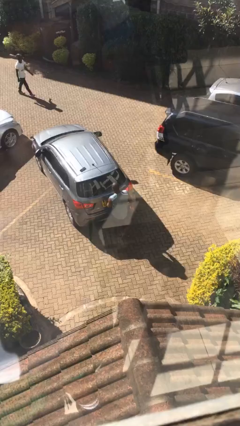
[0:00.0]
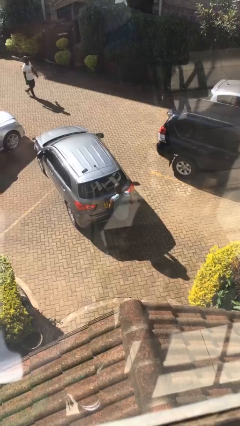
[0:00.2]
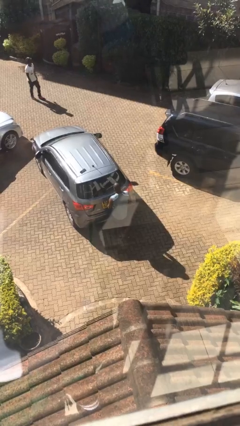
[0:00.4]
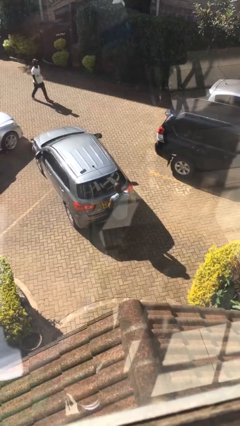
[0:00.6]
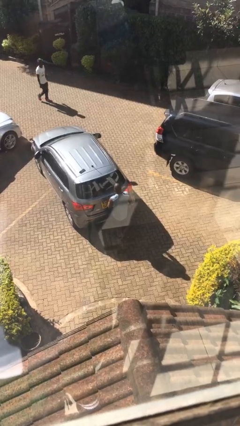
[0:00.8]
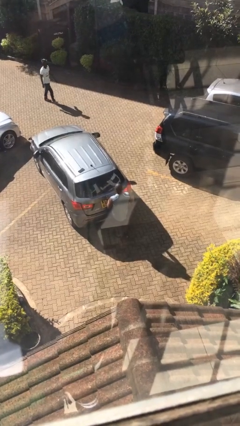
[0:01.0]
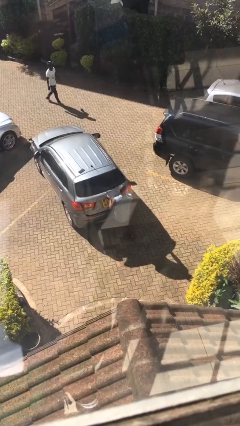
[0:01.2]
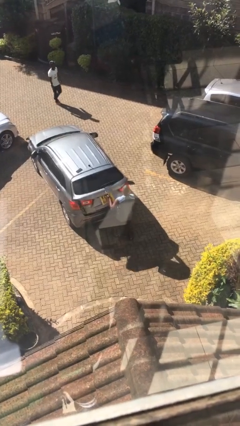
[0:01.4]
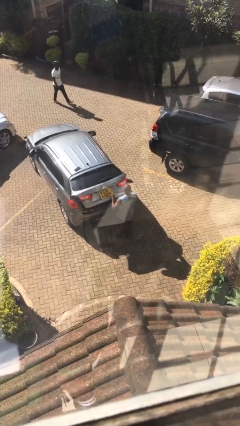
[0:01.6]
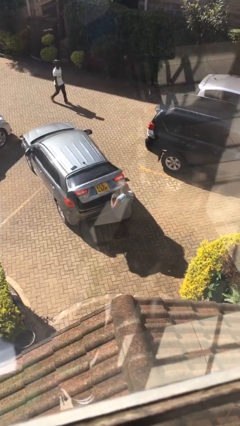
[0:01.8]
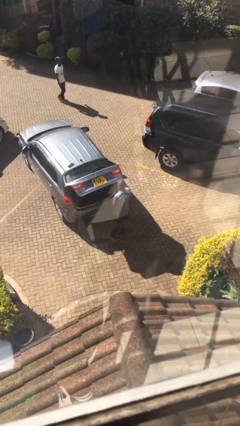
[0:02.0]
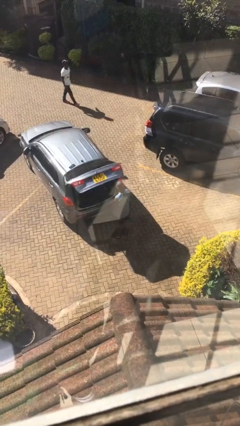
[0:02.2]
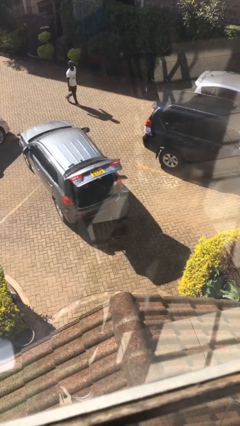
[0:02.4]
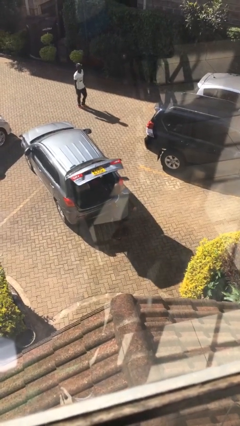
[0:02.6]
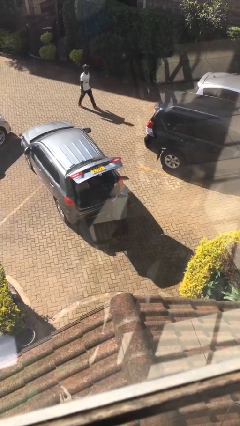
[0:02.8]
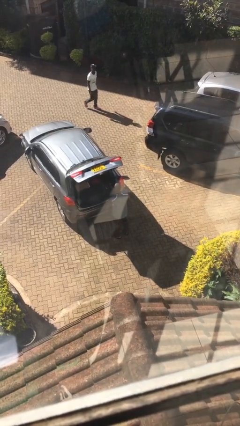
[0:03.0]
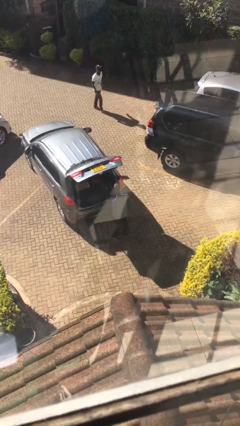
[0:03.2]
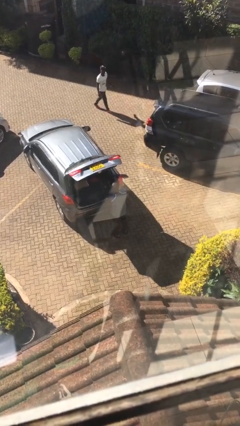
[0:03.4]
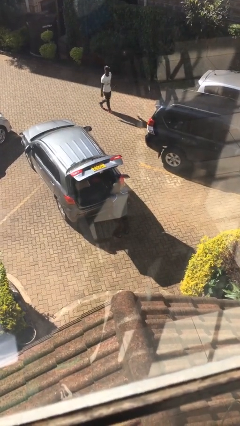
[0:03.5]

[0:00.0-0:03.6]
person opens car trunk

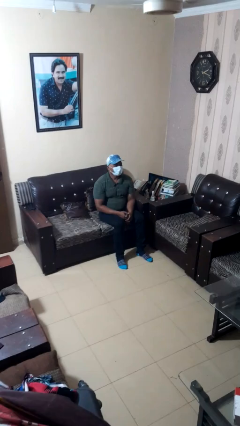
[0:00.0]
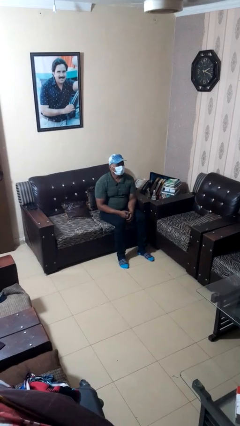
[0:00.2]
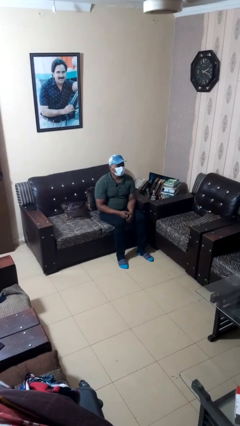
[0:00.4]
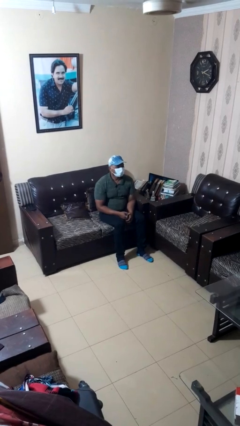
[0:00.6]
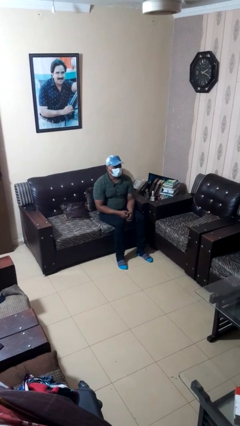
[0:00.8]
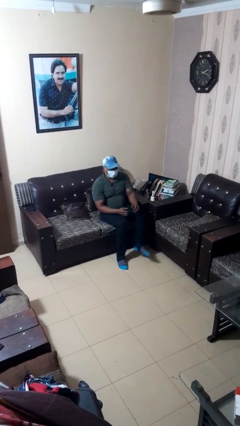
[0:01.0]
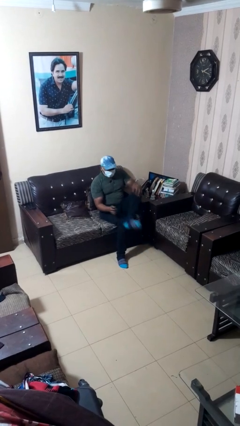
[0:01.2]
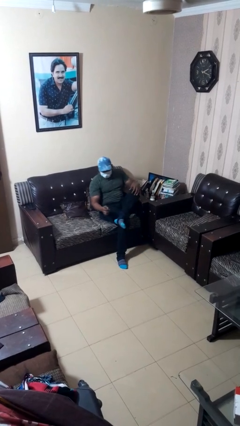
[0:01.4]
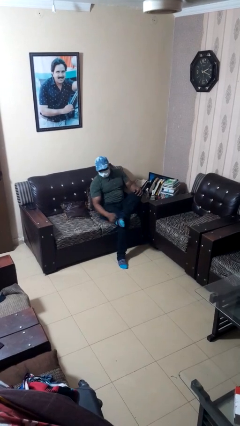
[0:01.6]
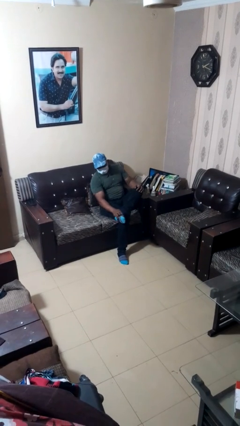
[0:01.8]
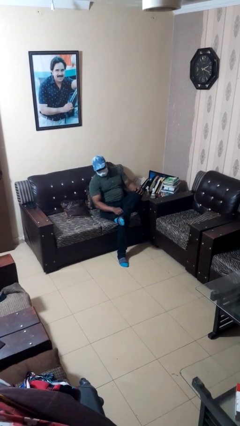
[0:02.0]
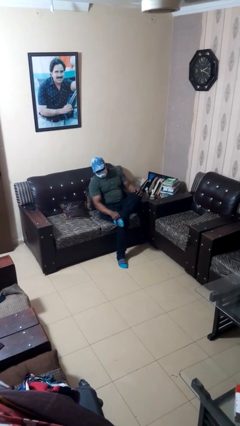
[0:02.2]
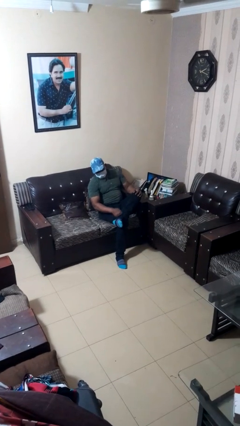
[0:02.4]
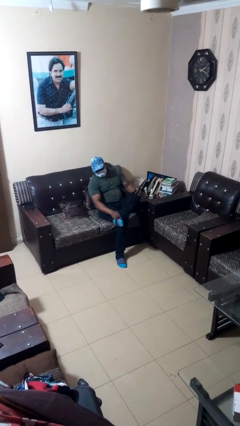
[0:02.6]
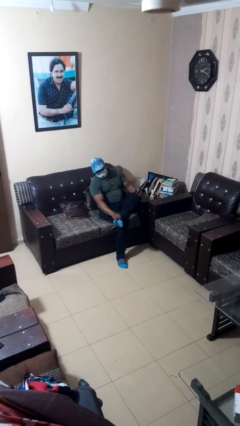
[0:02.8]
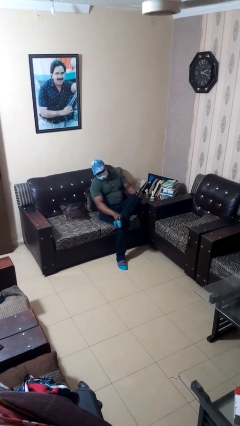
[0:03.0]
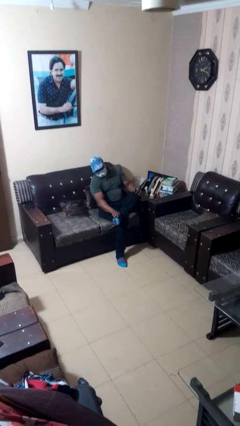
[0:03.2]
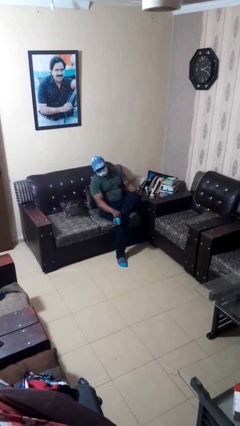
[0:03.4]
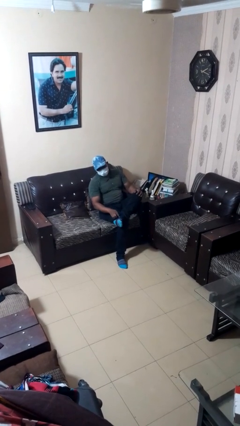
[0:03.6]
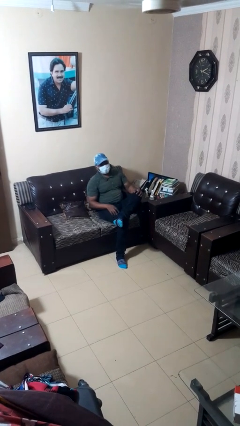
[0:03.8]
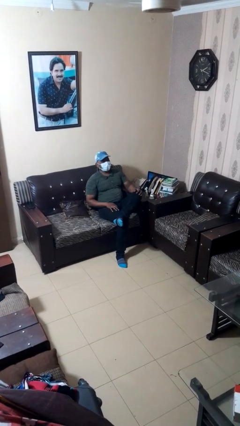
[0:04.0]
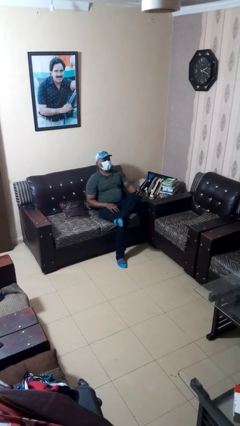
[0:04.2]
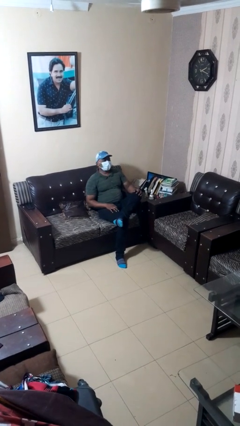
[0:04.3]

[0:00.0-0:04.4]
person rubs foot

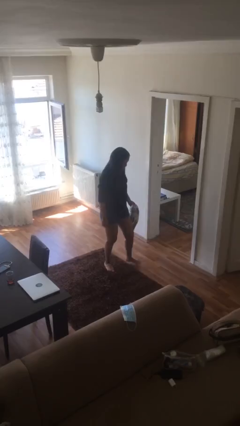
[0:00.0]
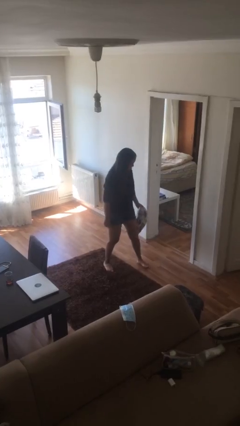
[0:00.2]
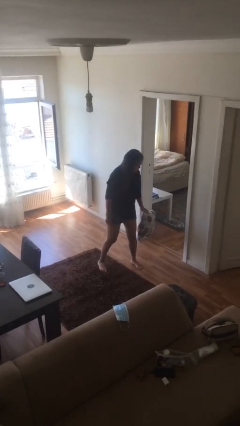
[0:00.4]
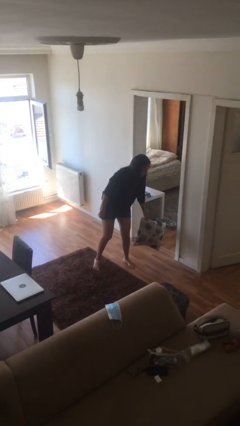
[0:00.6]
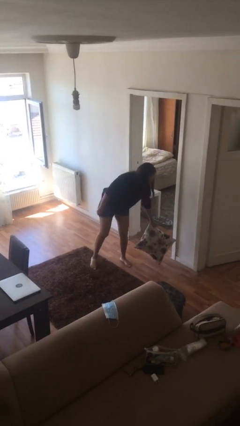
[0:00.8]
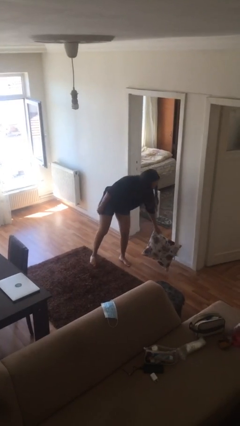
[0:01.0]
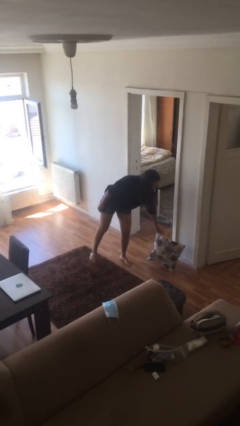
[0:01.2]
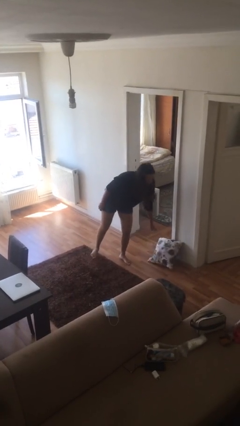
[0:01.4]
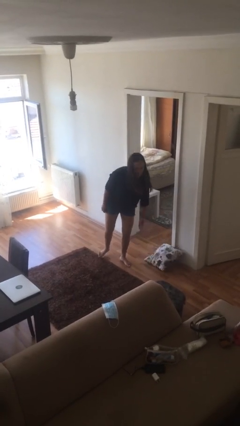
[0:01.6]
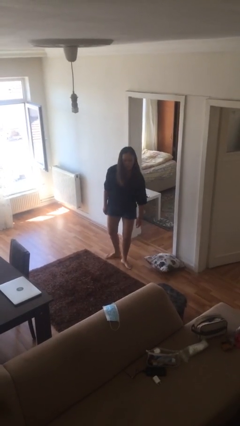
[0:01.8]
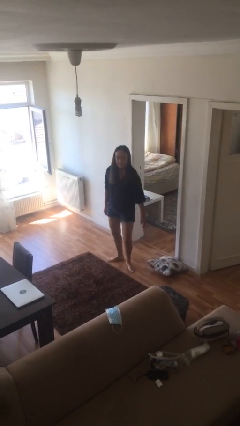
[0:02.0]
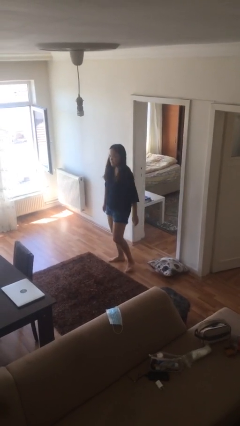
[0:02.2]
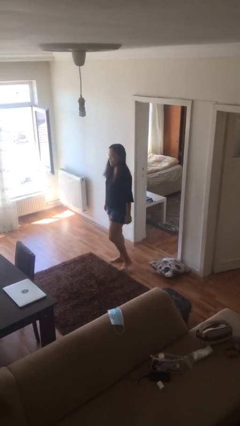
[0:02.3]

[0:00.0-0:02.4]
person puts down object on floor

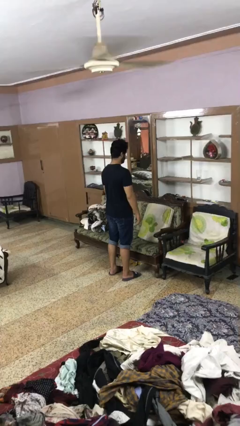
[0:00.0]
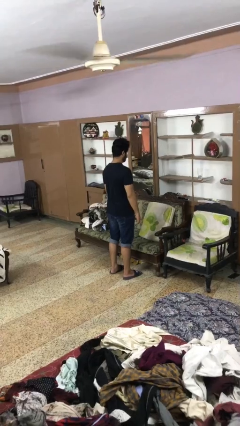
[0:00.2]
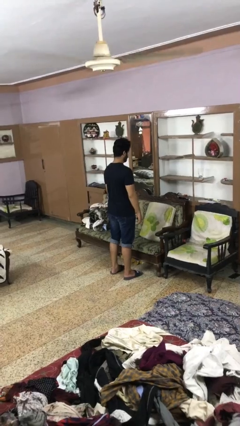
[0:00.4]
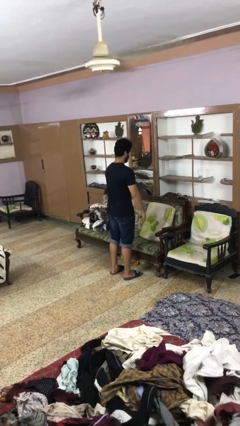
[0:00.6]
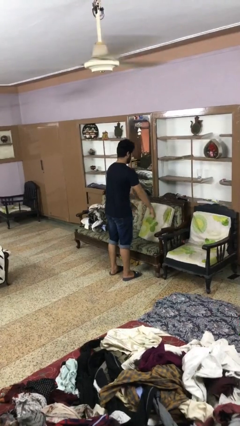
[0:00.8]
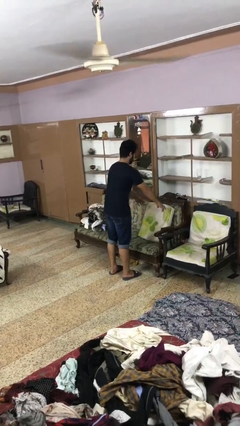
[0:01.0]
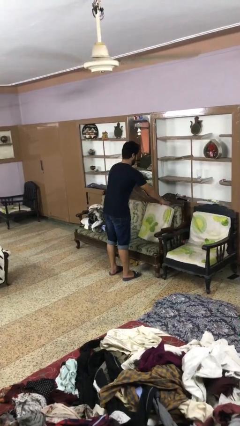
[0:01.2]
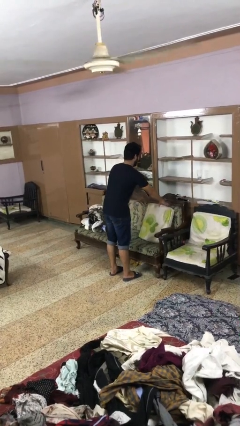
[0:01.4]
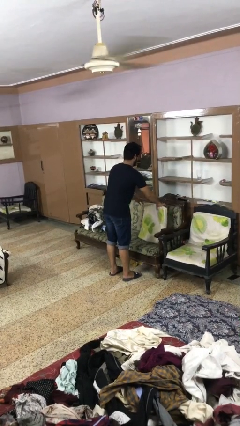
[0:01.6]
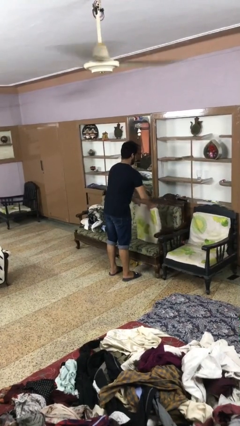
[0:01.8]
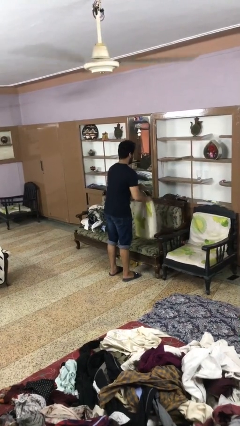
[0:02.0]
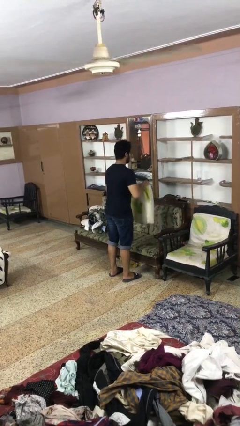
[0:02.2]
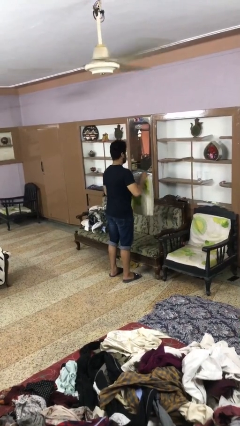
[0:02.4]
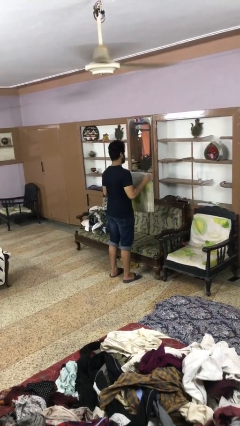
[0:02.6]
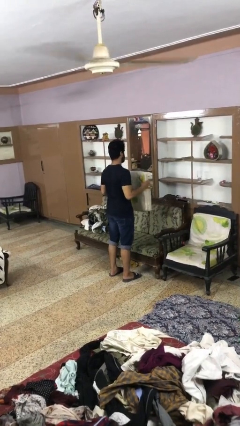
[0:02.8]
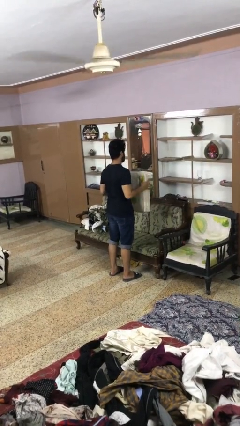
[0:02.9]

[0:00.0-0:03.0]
person picks up object from couch

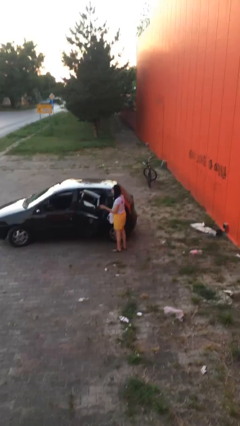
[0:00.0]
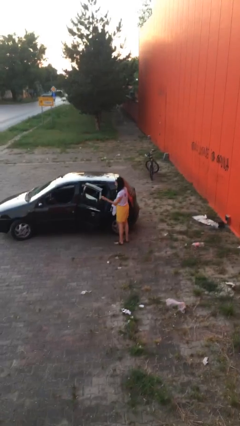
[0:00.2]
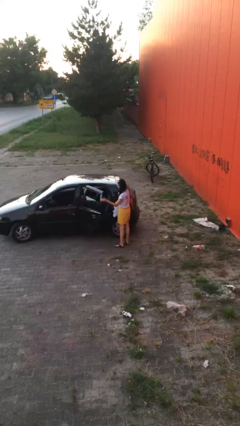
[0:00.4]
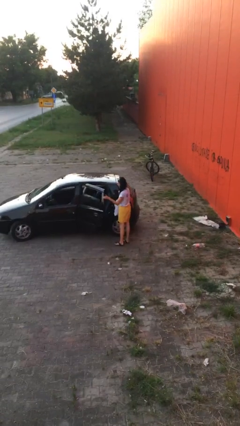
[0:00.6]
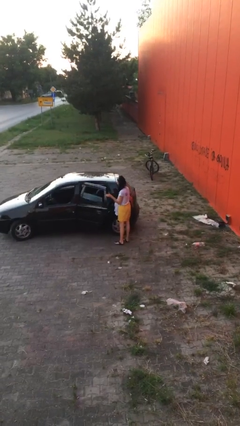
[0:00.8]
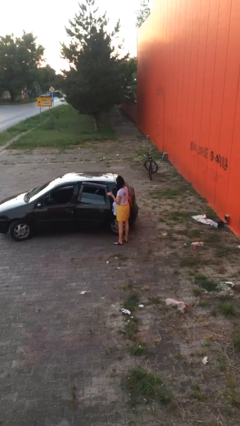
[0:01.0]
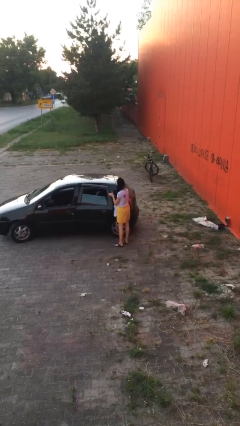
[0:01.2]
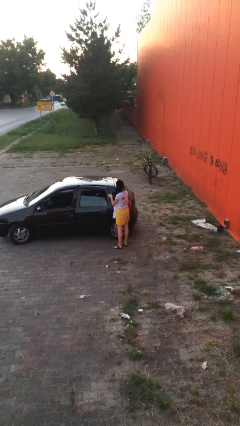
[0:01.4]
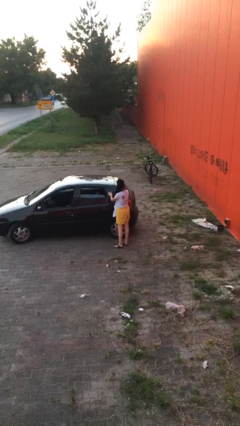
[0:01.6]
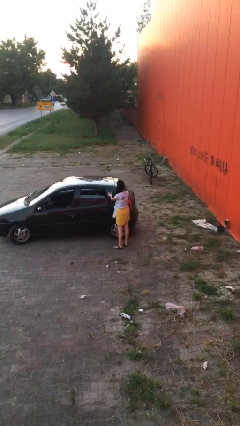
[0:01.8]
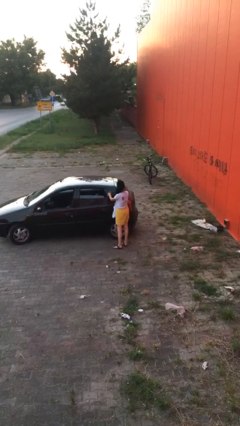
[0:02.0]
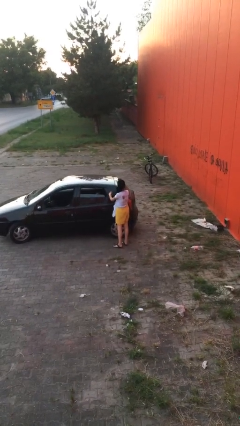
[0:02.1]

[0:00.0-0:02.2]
person closes car door

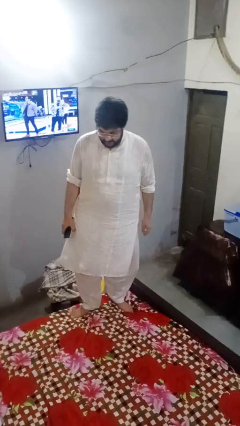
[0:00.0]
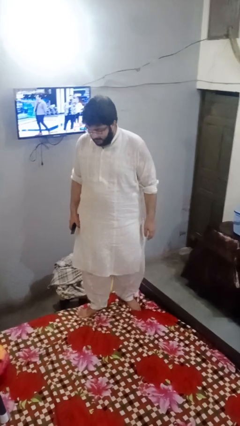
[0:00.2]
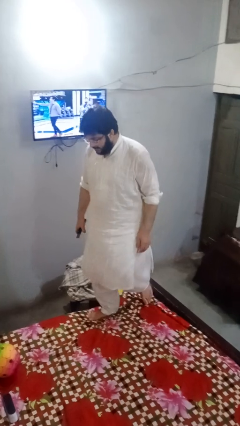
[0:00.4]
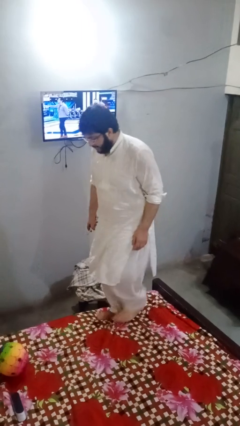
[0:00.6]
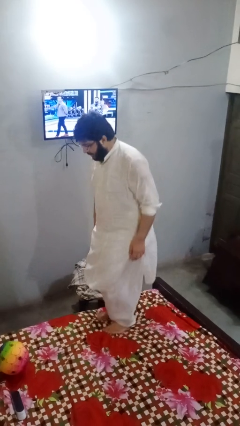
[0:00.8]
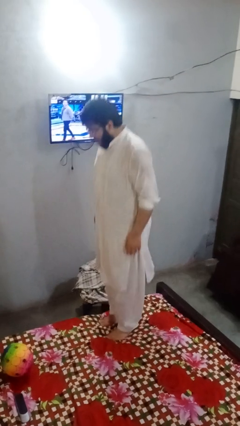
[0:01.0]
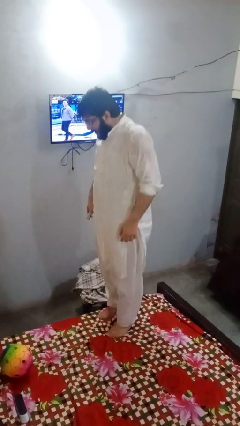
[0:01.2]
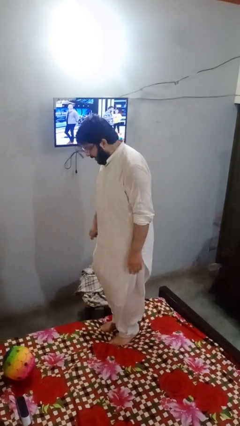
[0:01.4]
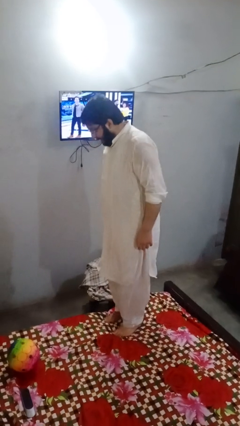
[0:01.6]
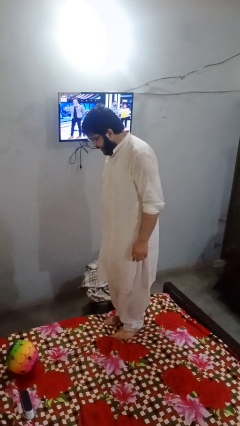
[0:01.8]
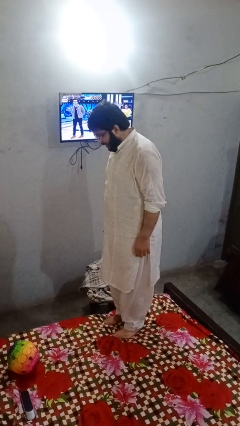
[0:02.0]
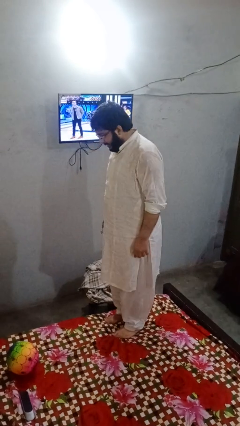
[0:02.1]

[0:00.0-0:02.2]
person jumps on bed
